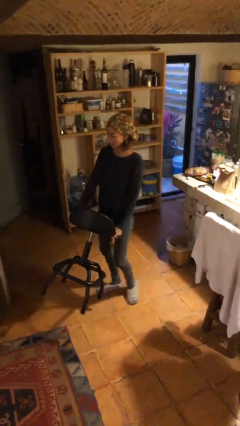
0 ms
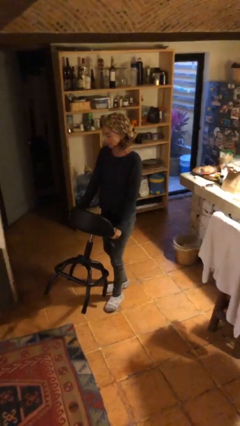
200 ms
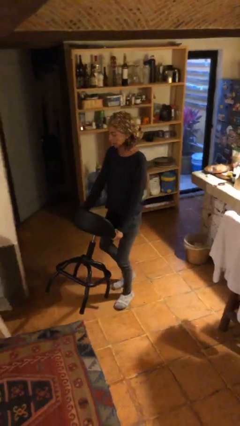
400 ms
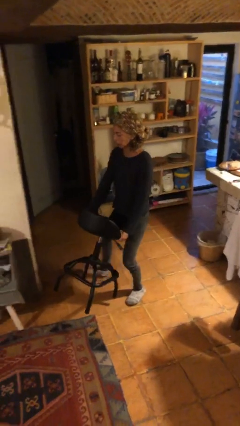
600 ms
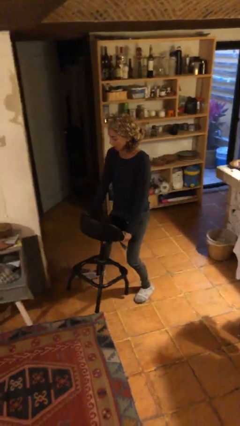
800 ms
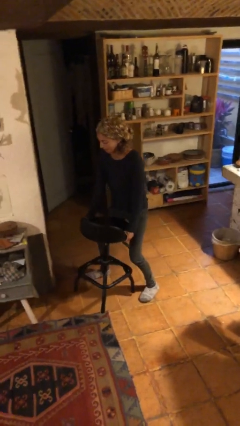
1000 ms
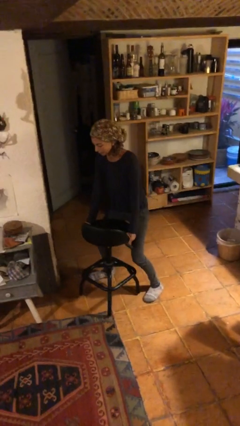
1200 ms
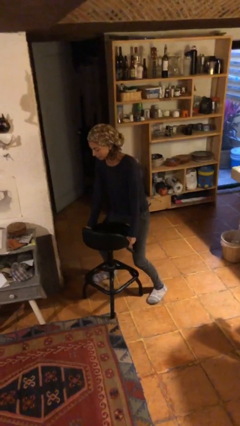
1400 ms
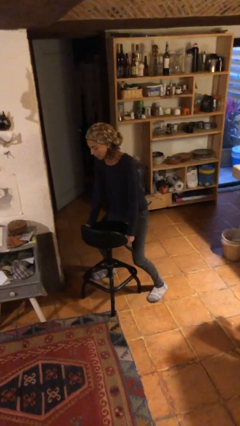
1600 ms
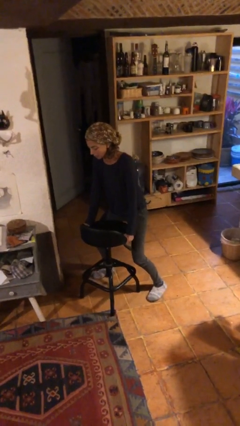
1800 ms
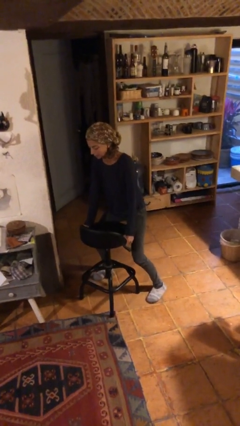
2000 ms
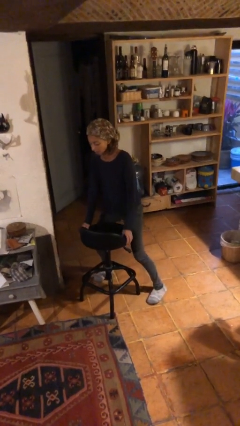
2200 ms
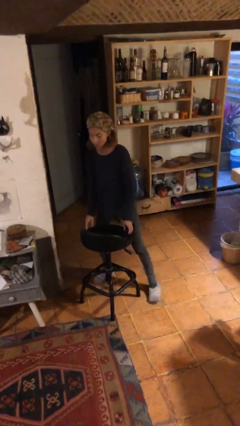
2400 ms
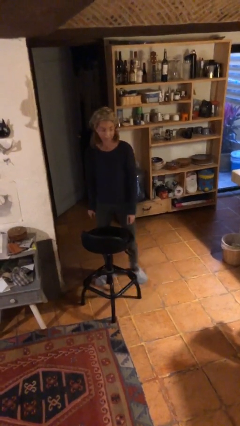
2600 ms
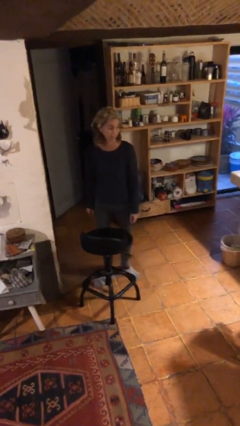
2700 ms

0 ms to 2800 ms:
person puts down object on floor

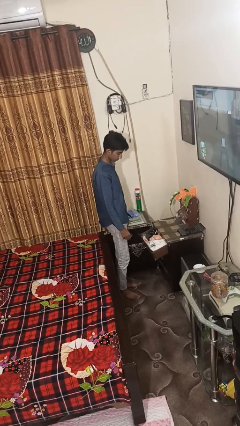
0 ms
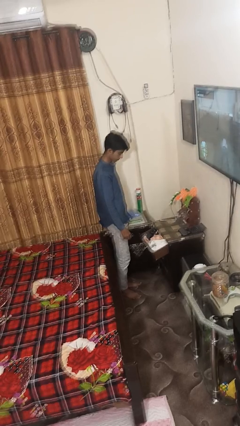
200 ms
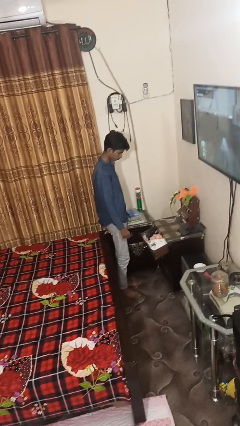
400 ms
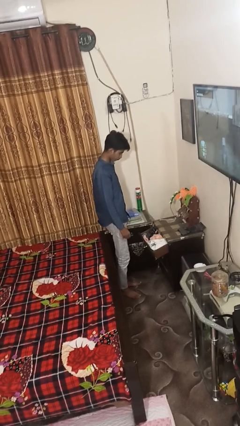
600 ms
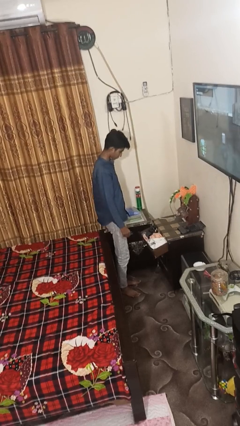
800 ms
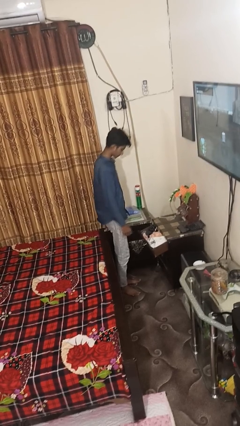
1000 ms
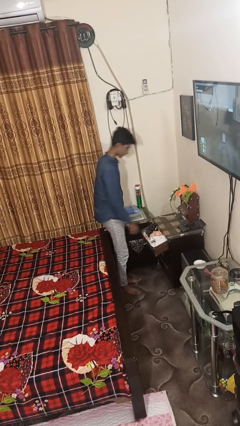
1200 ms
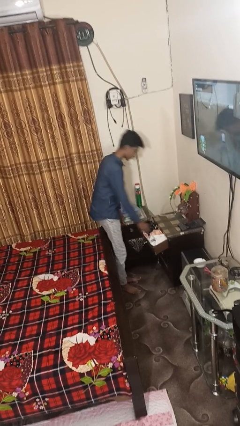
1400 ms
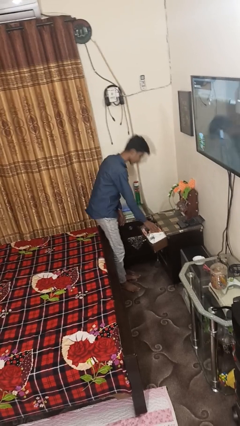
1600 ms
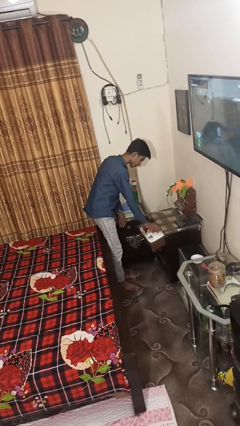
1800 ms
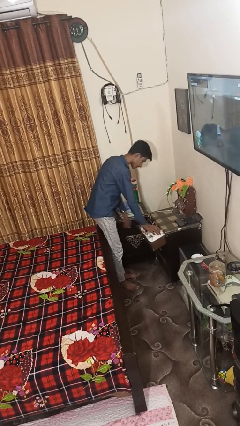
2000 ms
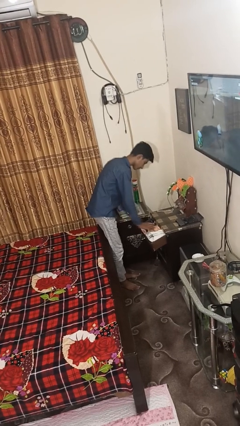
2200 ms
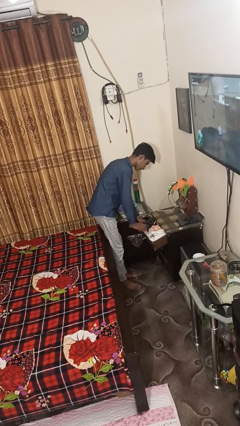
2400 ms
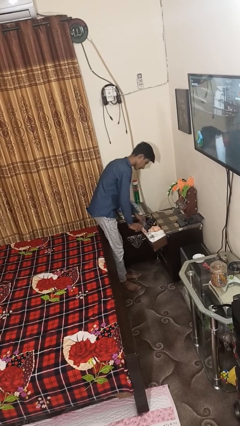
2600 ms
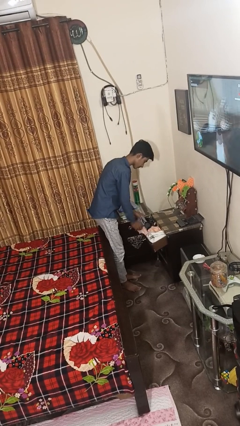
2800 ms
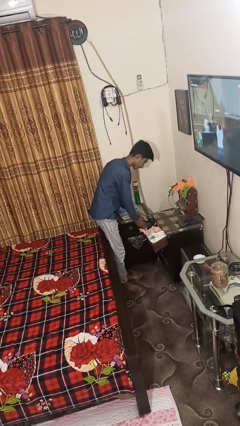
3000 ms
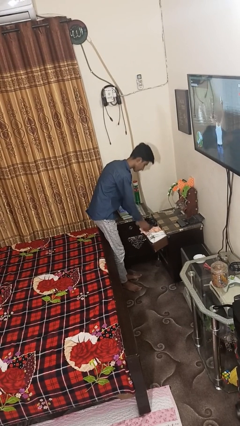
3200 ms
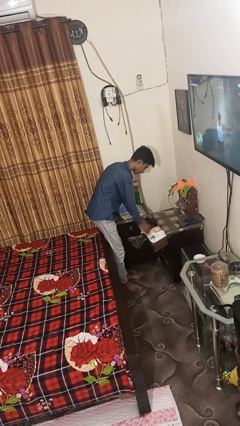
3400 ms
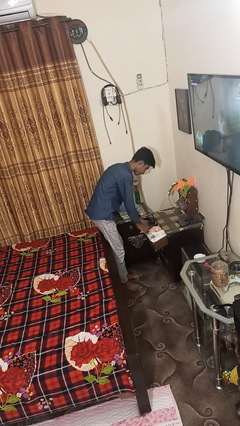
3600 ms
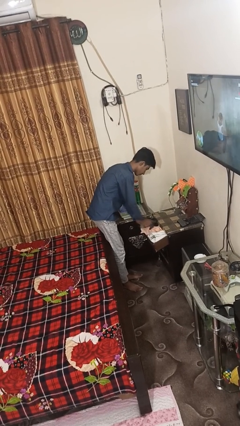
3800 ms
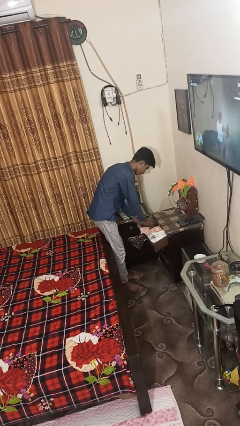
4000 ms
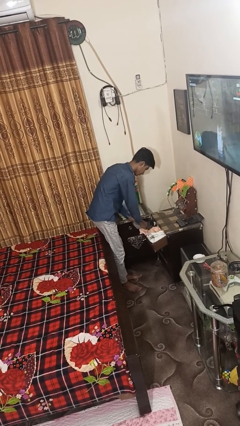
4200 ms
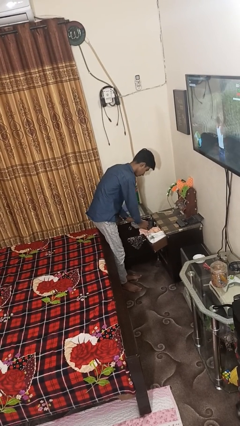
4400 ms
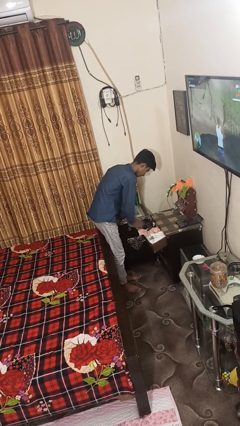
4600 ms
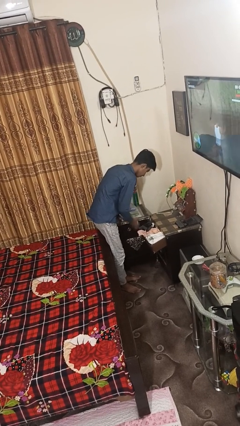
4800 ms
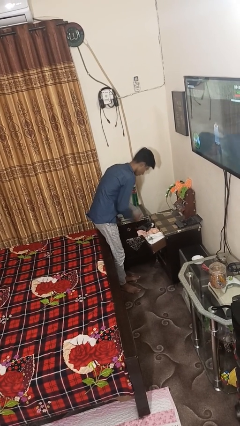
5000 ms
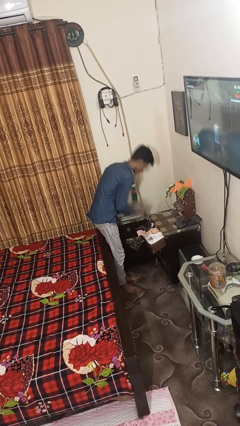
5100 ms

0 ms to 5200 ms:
person takes clothes from dresser

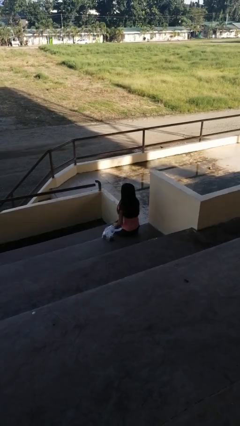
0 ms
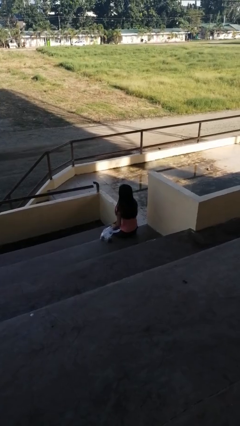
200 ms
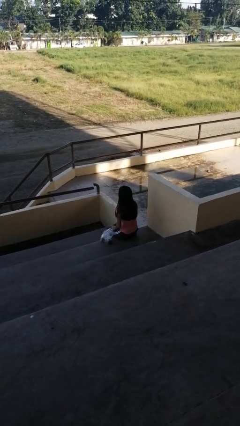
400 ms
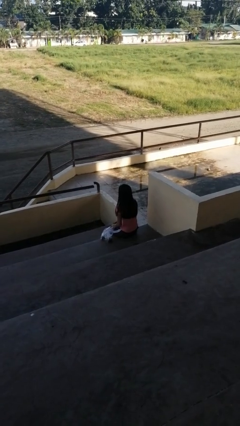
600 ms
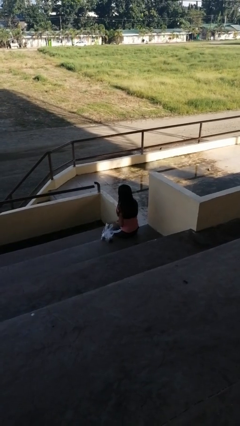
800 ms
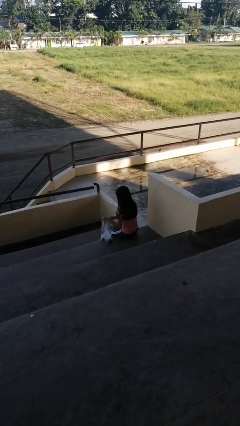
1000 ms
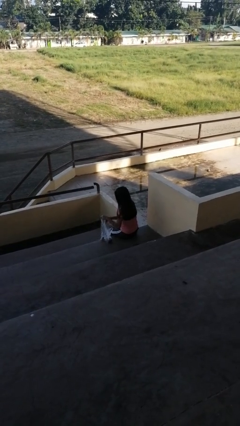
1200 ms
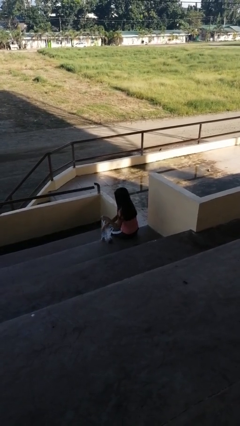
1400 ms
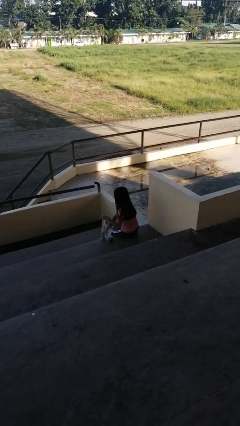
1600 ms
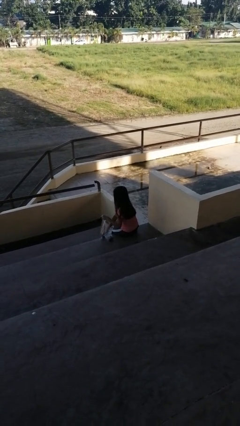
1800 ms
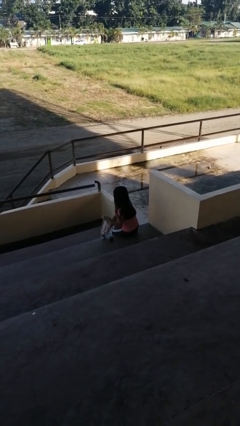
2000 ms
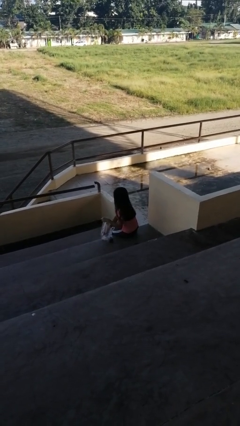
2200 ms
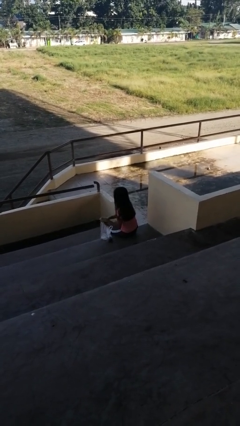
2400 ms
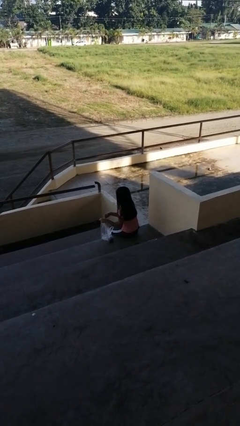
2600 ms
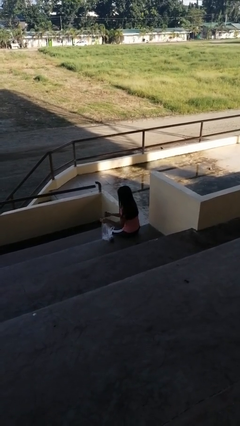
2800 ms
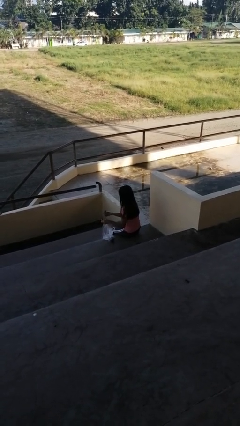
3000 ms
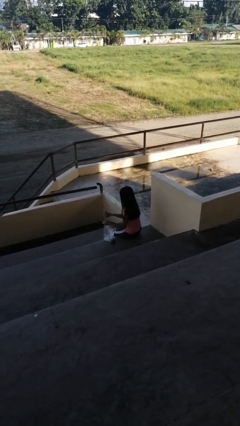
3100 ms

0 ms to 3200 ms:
person takes object from bag

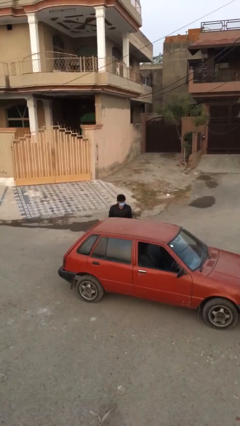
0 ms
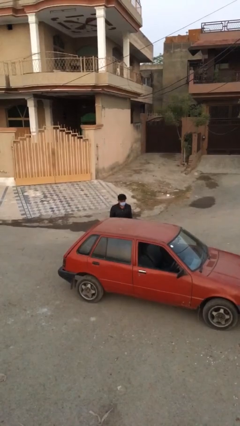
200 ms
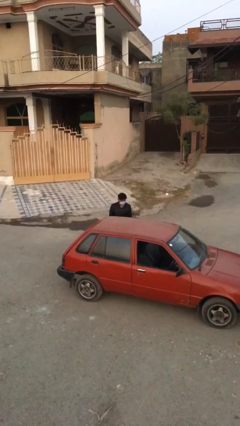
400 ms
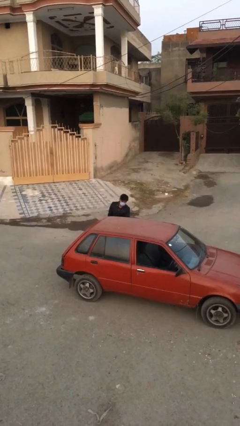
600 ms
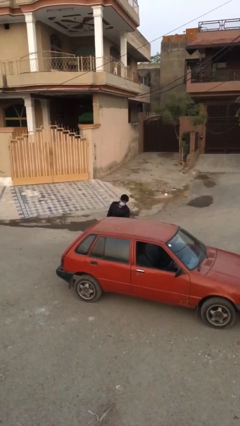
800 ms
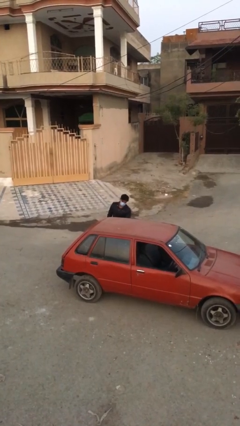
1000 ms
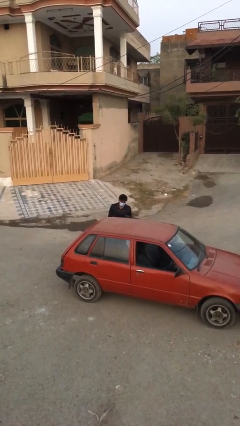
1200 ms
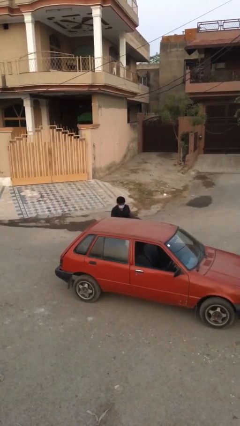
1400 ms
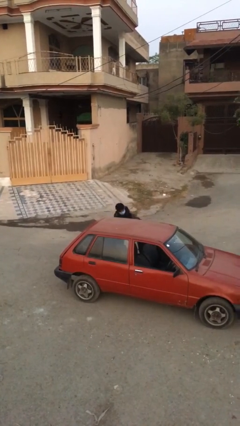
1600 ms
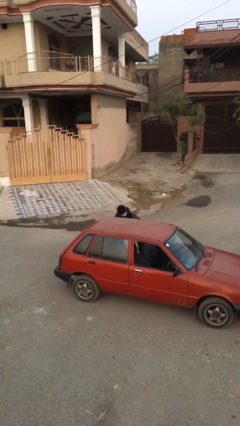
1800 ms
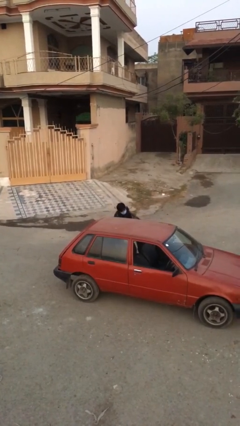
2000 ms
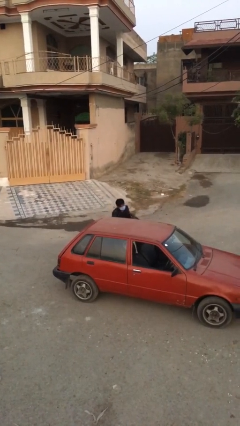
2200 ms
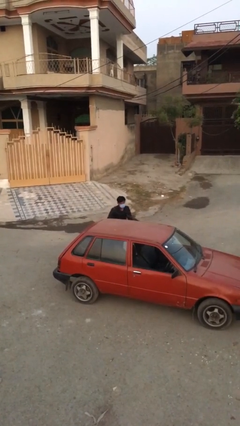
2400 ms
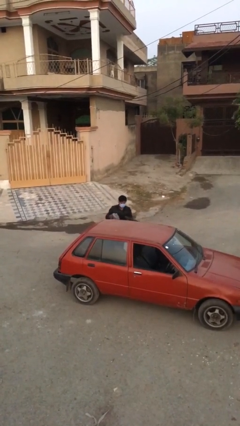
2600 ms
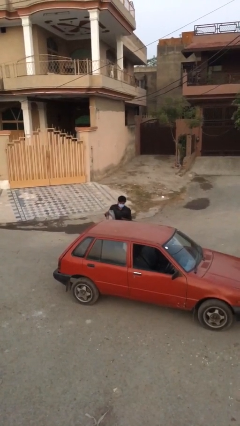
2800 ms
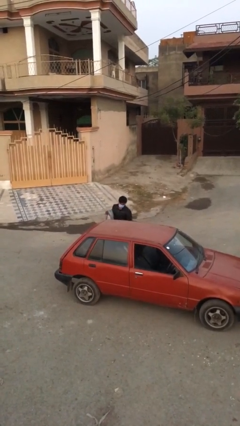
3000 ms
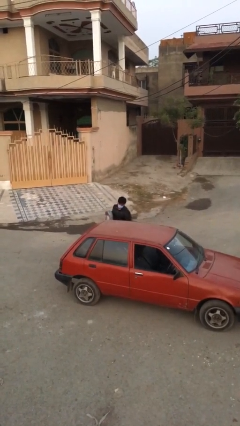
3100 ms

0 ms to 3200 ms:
person unloads car

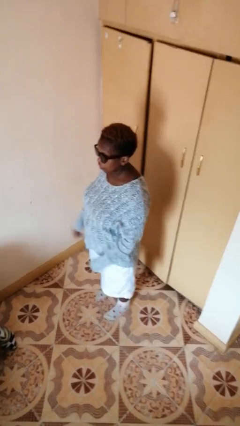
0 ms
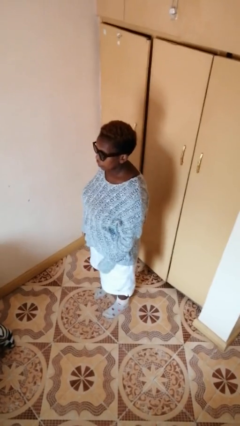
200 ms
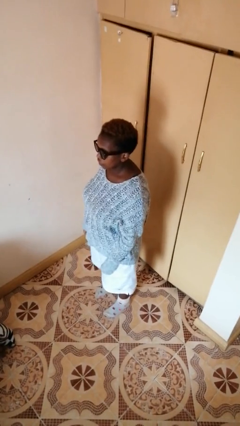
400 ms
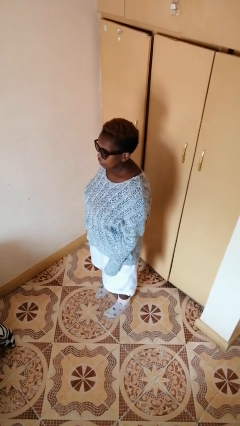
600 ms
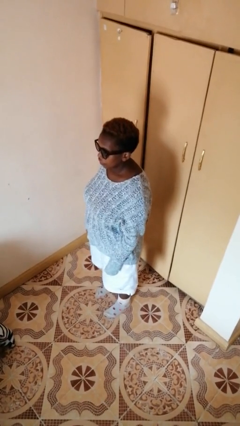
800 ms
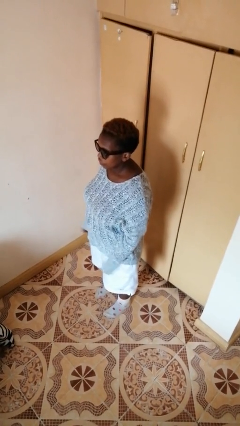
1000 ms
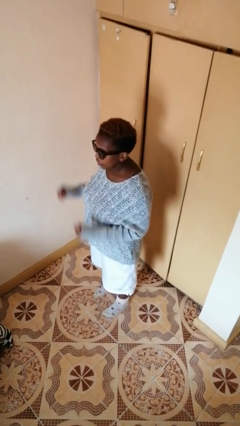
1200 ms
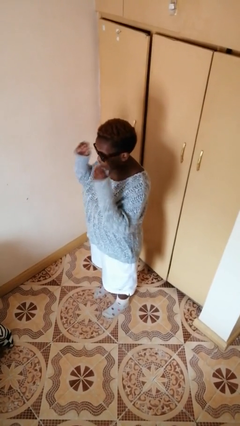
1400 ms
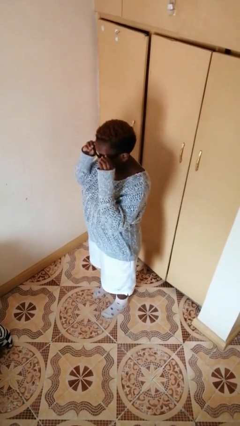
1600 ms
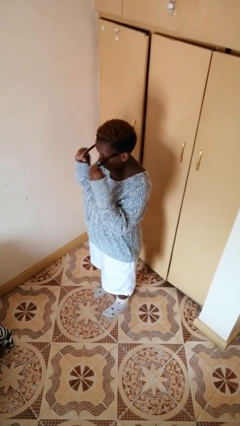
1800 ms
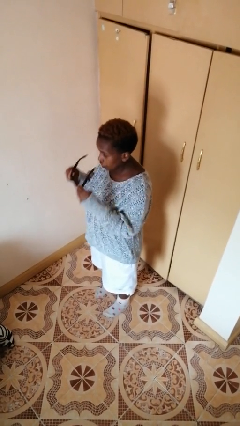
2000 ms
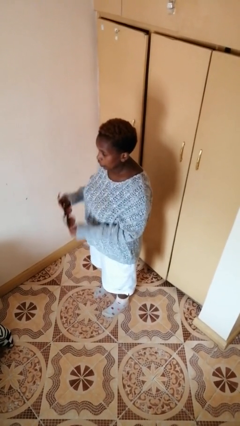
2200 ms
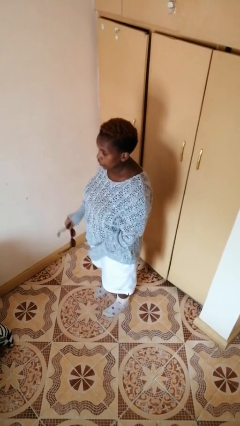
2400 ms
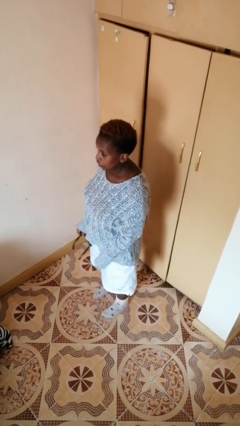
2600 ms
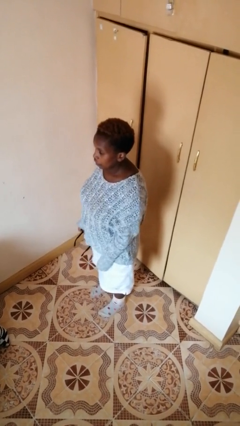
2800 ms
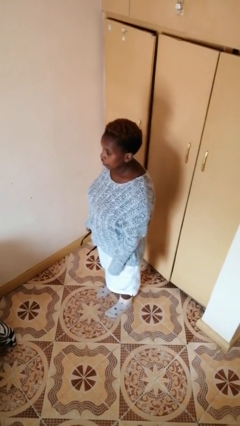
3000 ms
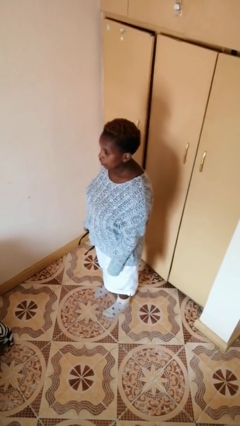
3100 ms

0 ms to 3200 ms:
person takes off sunglasses
